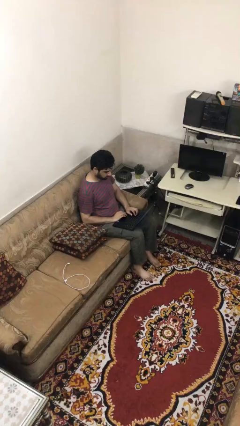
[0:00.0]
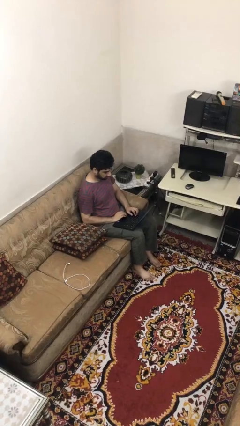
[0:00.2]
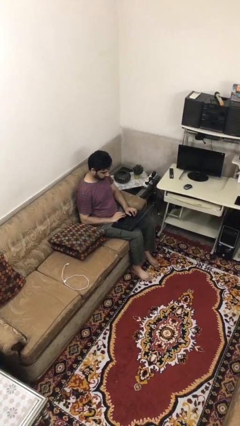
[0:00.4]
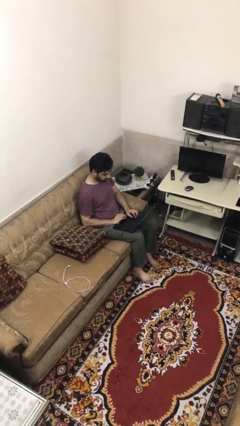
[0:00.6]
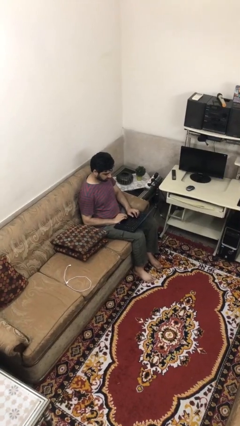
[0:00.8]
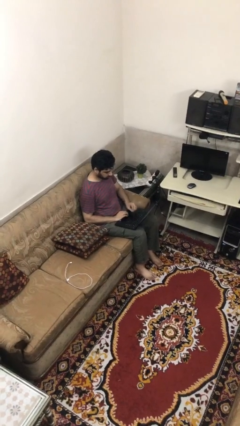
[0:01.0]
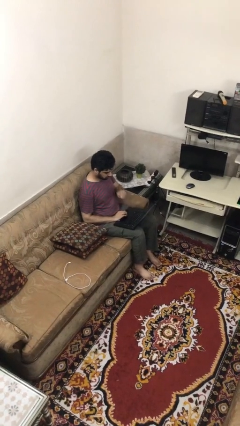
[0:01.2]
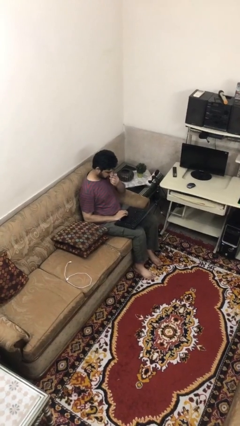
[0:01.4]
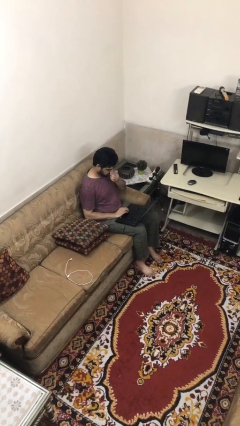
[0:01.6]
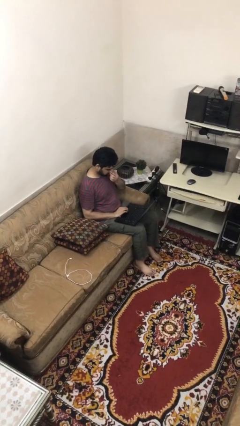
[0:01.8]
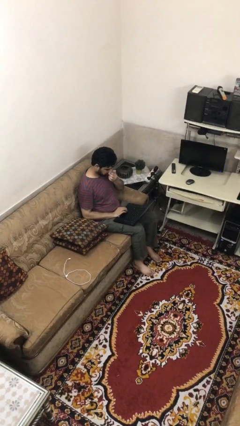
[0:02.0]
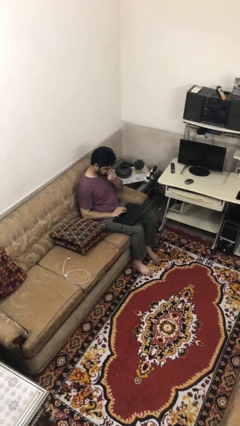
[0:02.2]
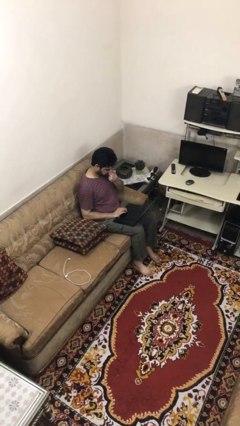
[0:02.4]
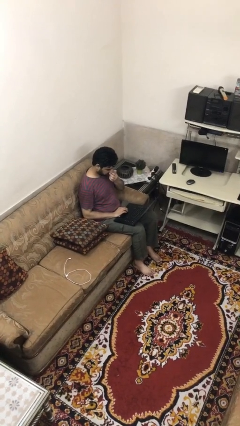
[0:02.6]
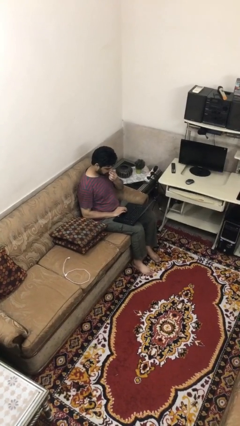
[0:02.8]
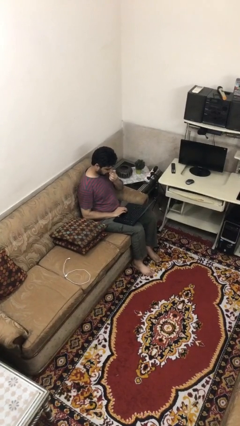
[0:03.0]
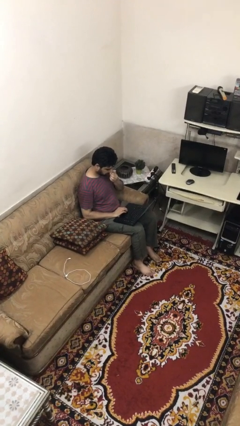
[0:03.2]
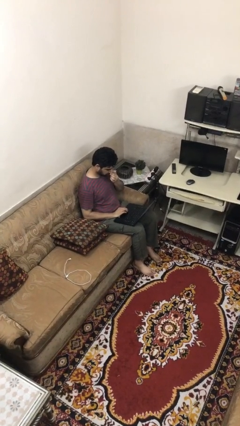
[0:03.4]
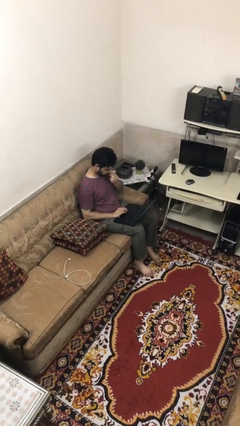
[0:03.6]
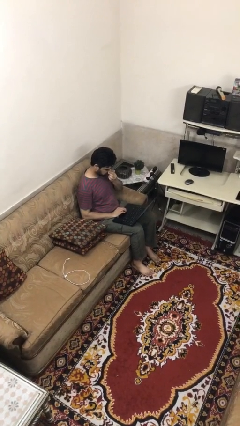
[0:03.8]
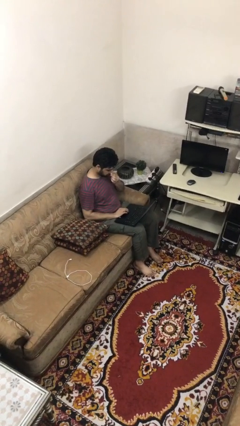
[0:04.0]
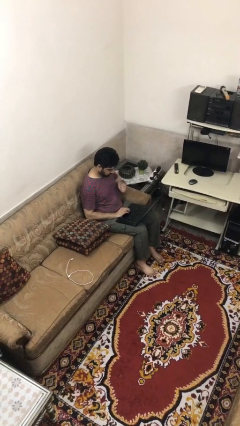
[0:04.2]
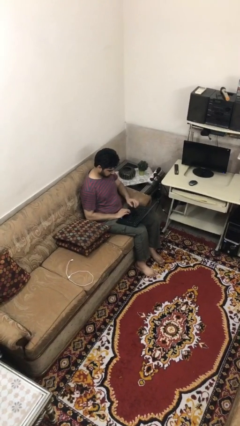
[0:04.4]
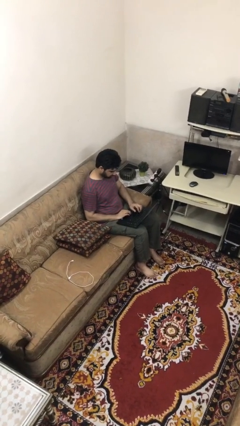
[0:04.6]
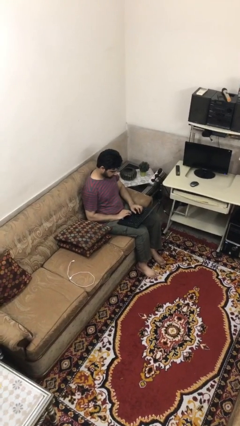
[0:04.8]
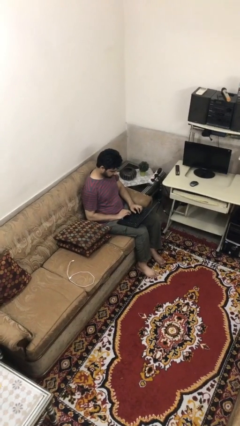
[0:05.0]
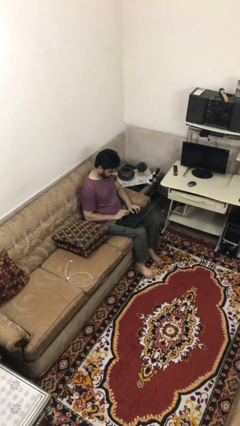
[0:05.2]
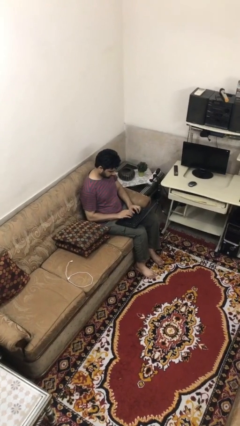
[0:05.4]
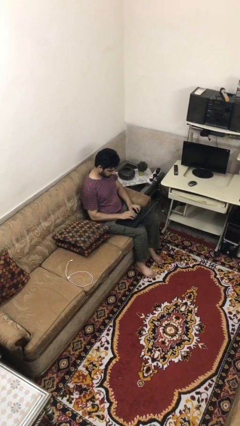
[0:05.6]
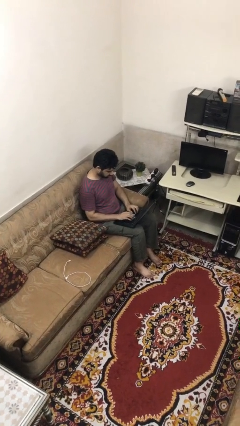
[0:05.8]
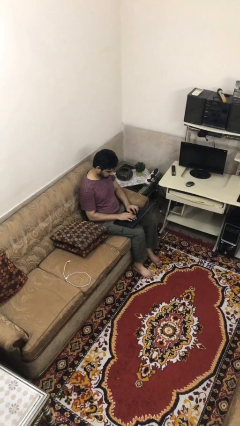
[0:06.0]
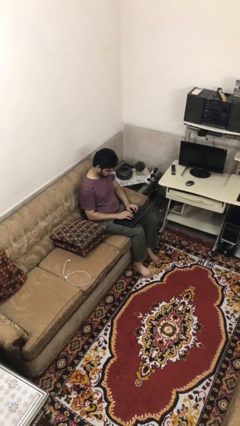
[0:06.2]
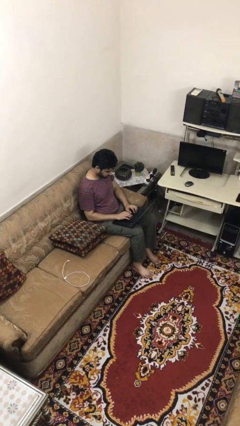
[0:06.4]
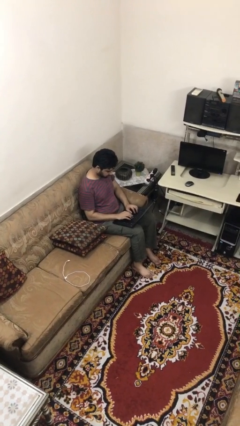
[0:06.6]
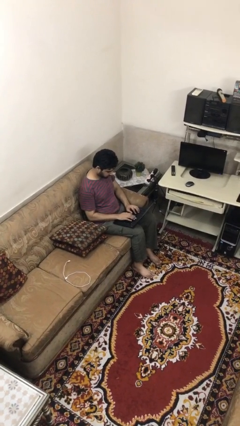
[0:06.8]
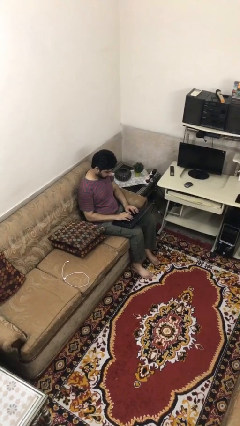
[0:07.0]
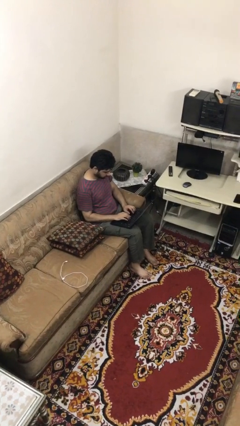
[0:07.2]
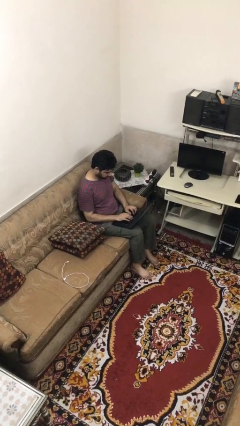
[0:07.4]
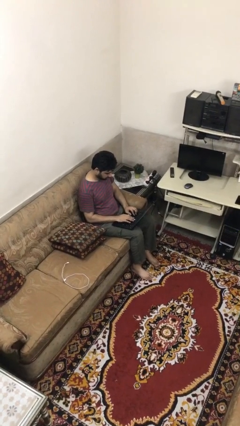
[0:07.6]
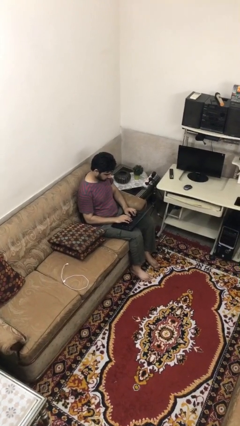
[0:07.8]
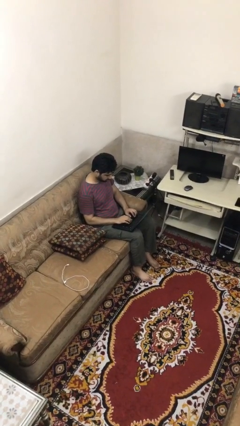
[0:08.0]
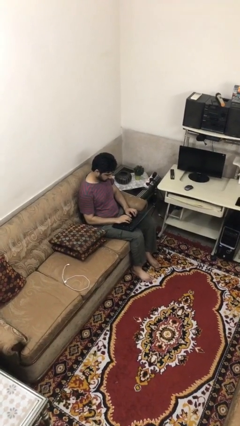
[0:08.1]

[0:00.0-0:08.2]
person interacts with laptop

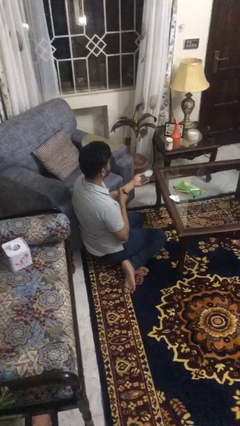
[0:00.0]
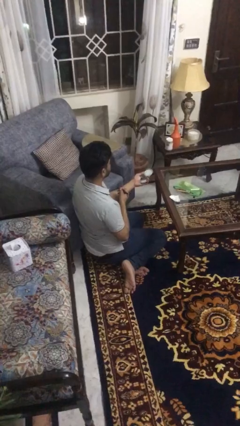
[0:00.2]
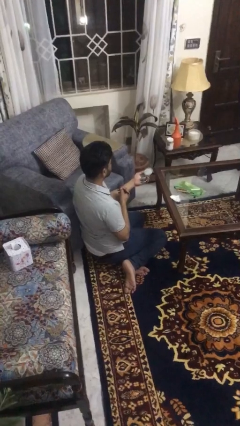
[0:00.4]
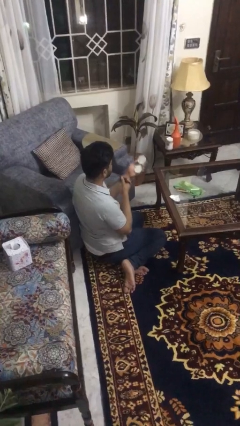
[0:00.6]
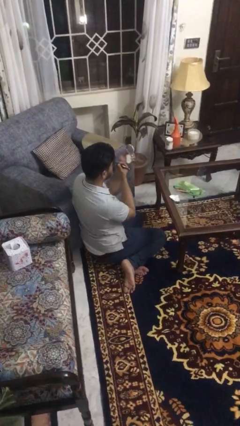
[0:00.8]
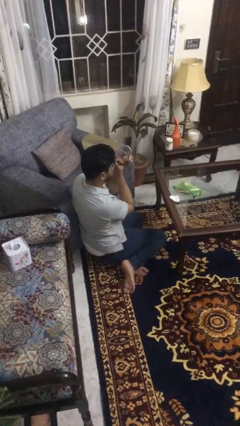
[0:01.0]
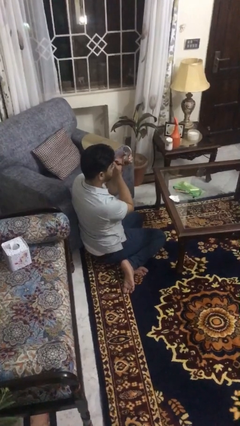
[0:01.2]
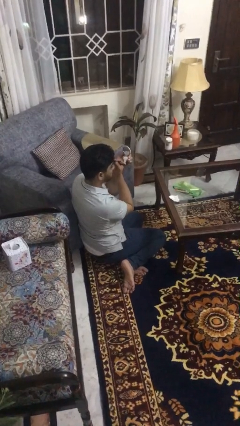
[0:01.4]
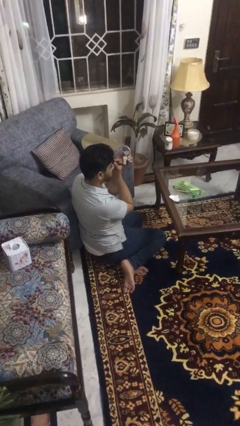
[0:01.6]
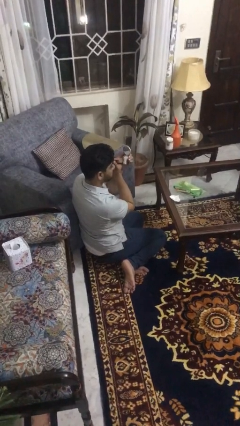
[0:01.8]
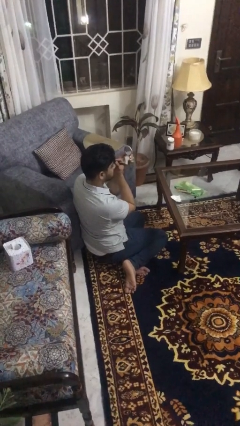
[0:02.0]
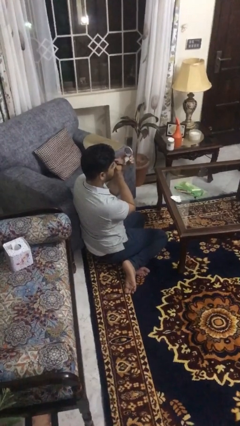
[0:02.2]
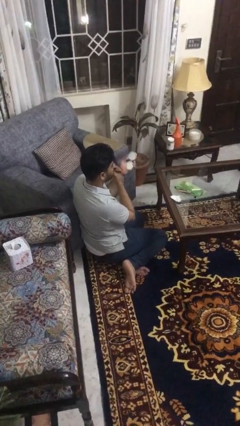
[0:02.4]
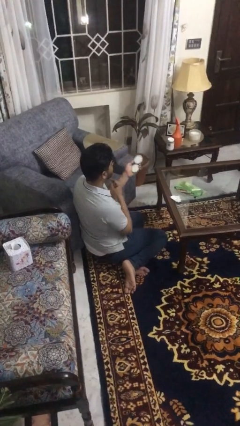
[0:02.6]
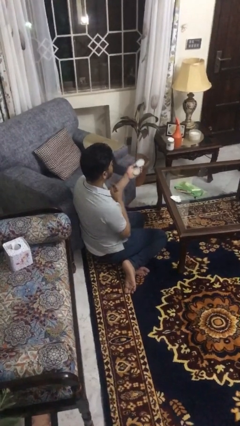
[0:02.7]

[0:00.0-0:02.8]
person applies eye makeup

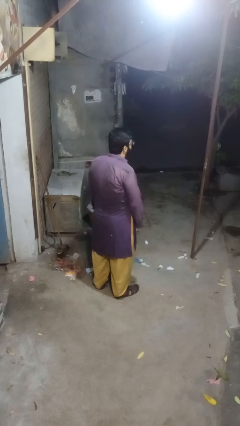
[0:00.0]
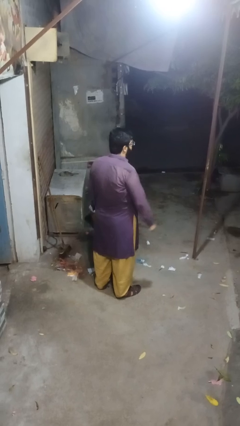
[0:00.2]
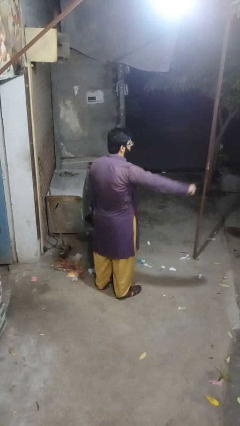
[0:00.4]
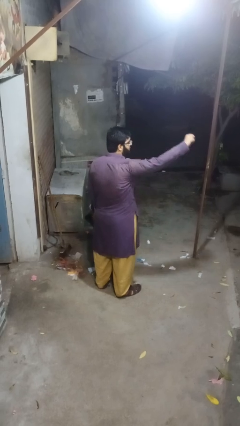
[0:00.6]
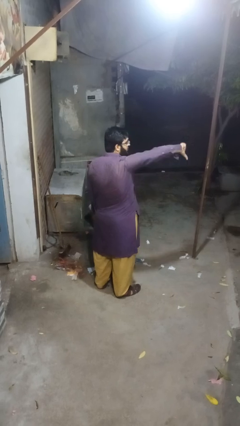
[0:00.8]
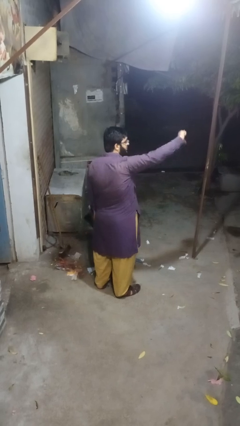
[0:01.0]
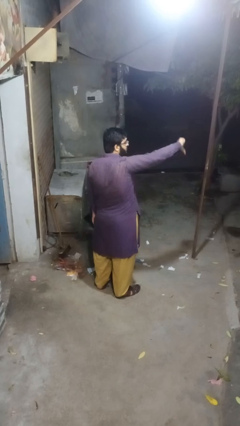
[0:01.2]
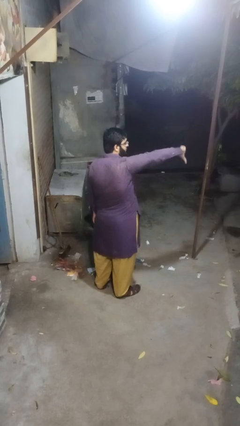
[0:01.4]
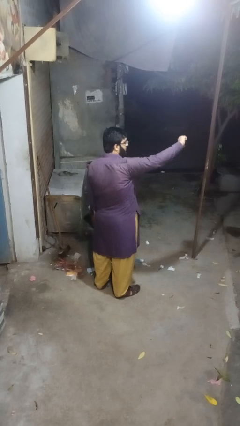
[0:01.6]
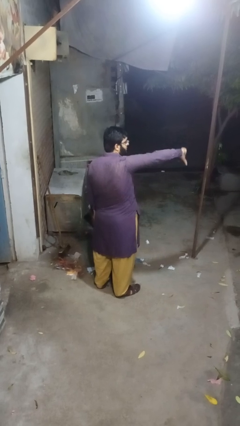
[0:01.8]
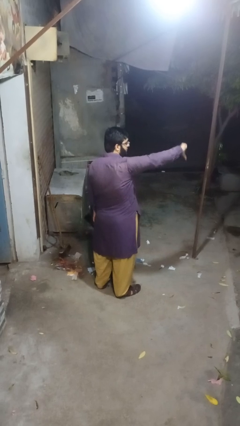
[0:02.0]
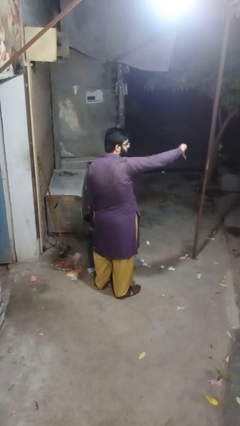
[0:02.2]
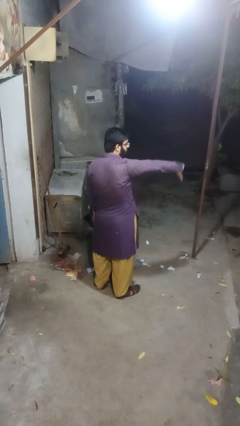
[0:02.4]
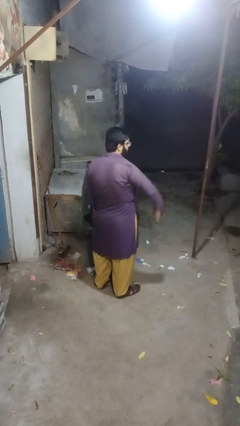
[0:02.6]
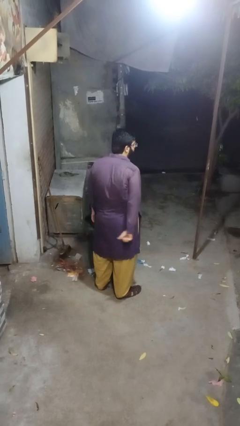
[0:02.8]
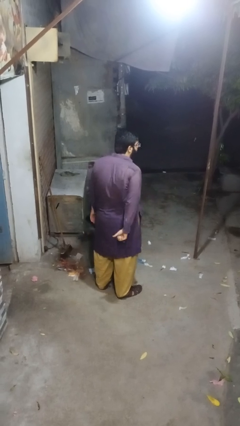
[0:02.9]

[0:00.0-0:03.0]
person gestures thumbs down

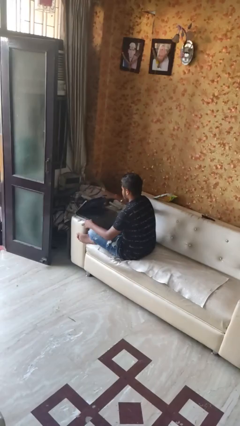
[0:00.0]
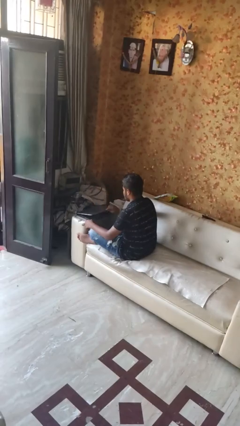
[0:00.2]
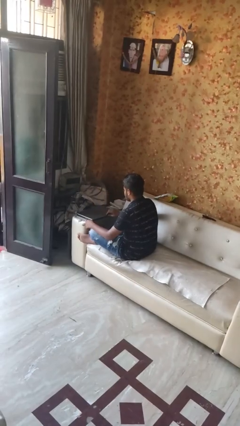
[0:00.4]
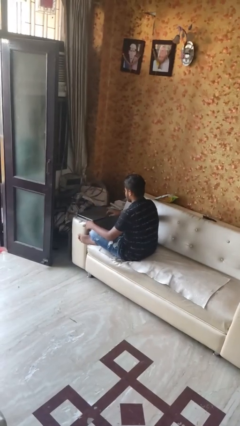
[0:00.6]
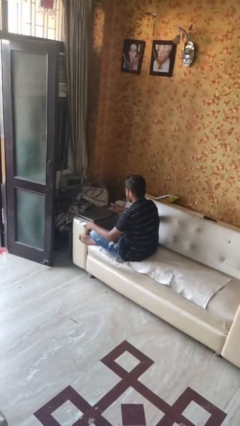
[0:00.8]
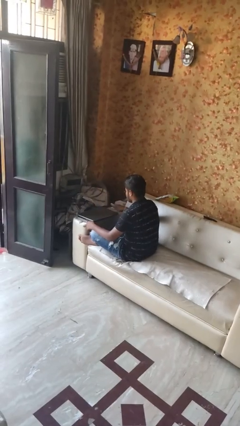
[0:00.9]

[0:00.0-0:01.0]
person closes laptop

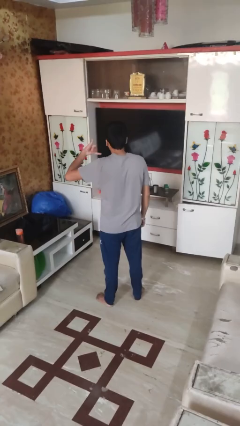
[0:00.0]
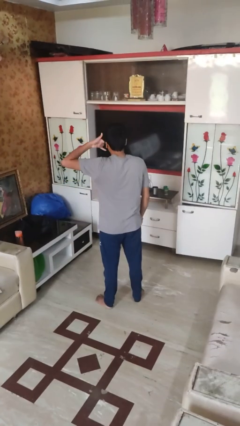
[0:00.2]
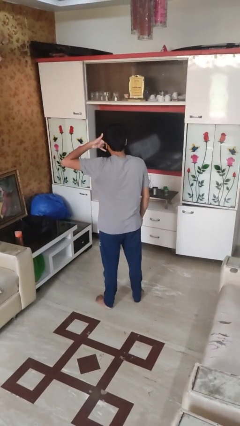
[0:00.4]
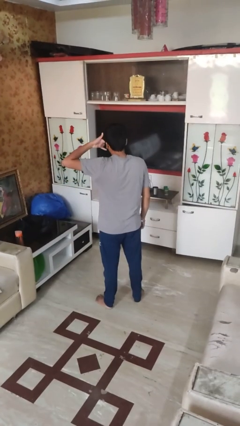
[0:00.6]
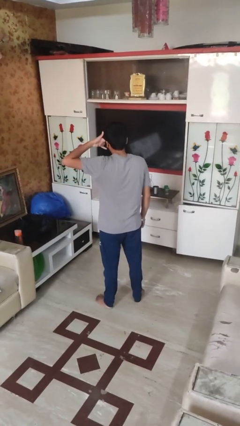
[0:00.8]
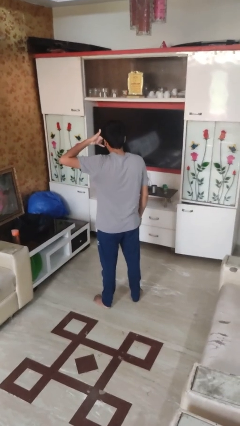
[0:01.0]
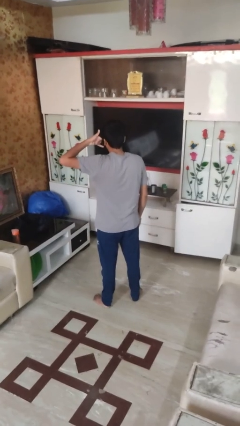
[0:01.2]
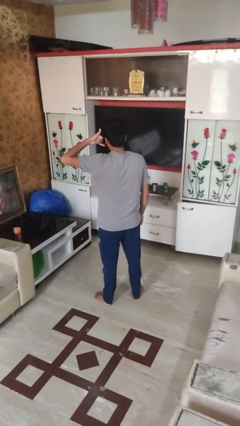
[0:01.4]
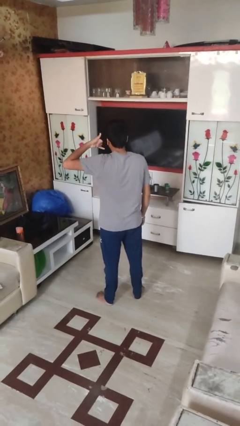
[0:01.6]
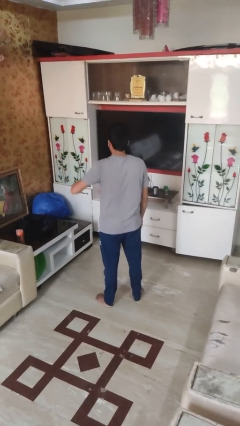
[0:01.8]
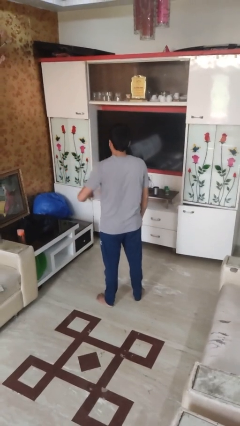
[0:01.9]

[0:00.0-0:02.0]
person gestures call me

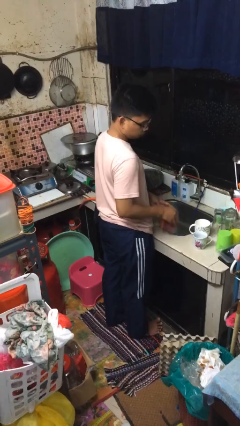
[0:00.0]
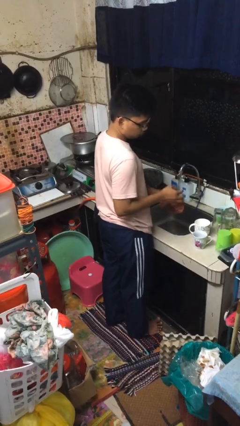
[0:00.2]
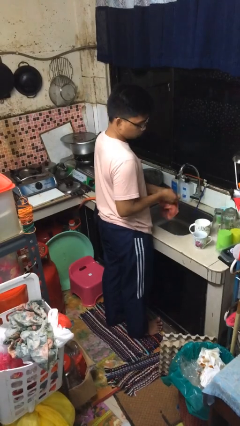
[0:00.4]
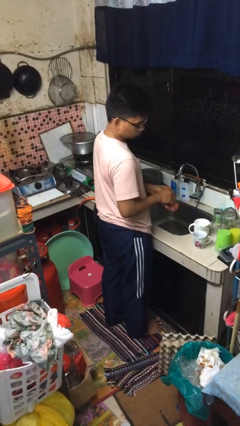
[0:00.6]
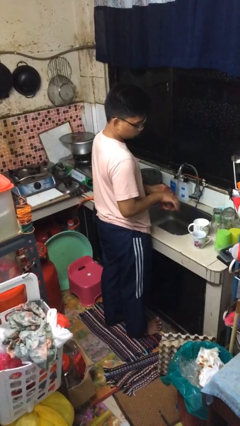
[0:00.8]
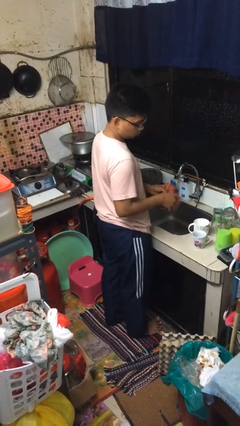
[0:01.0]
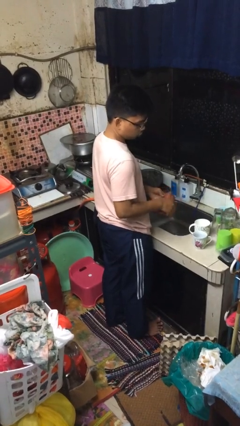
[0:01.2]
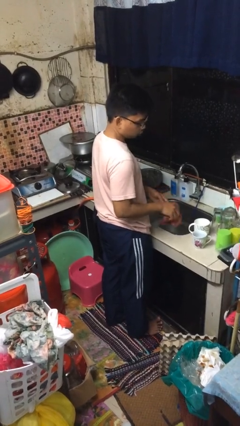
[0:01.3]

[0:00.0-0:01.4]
person dries hands with towel
